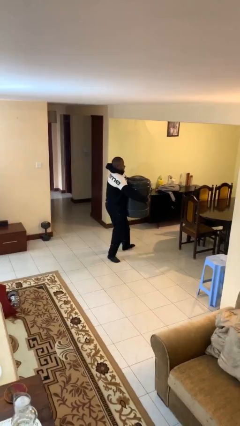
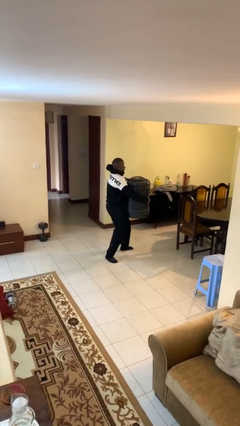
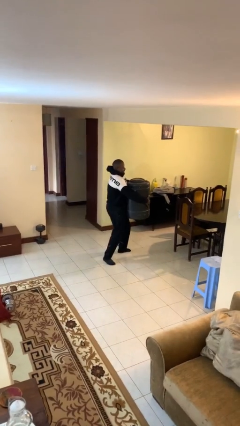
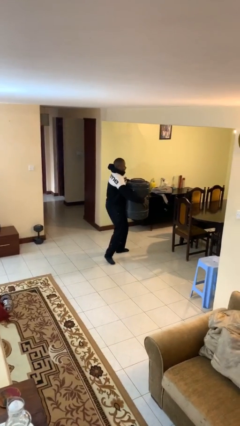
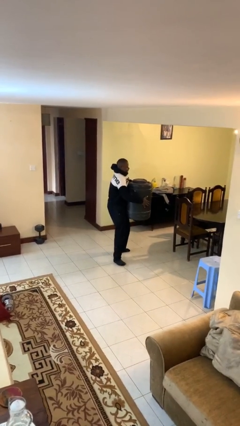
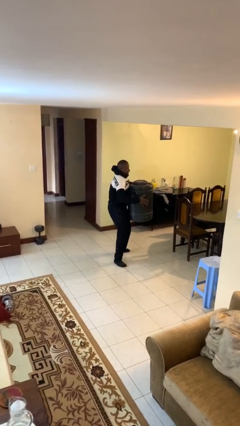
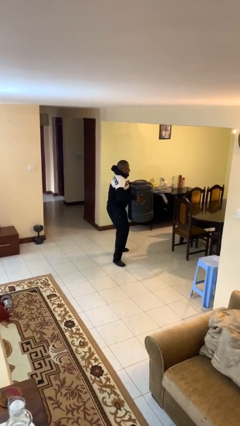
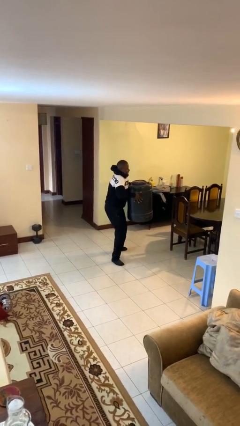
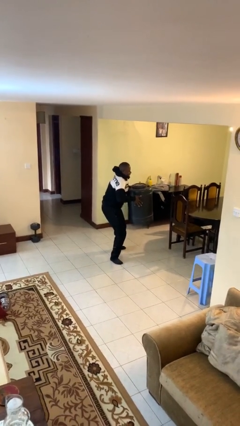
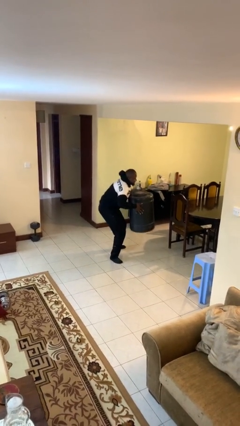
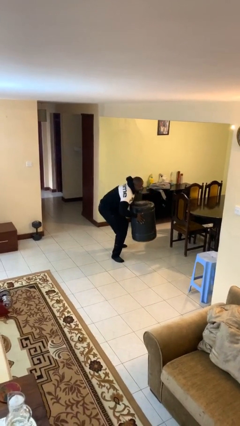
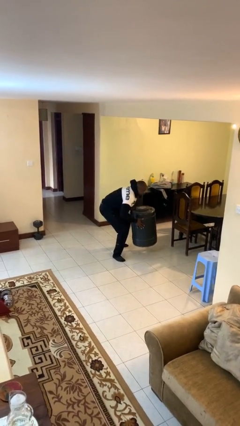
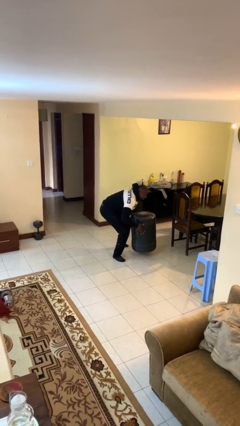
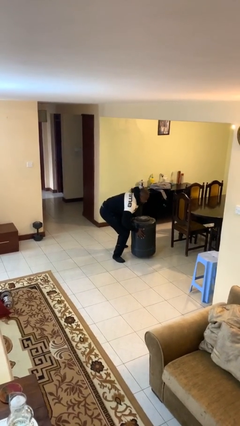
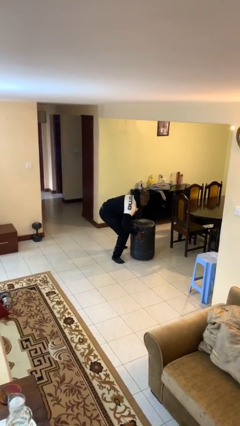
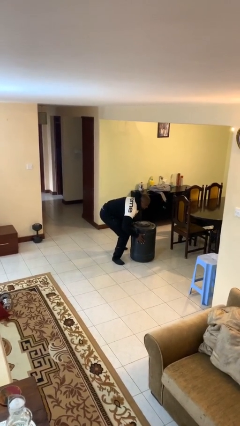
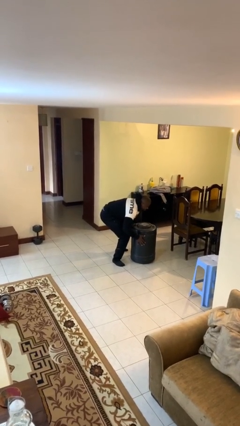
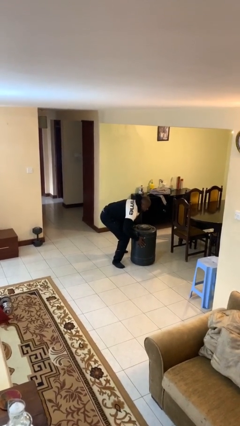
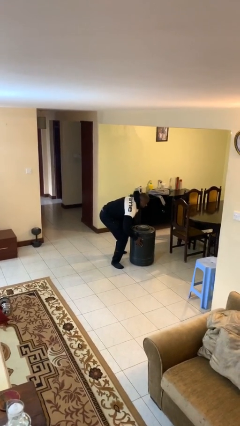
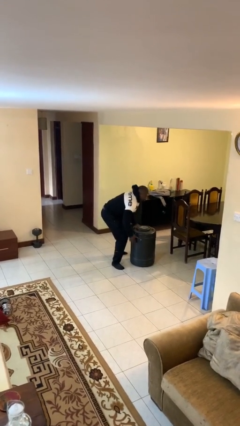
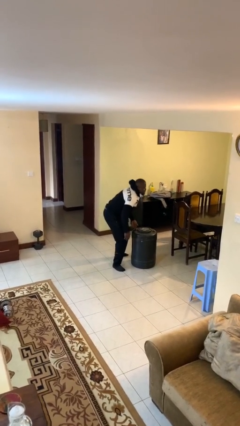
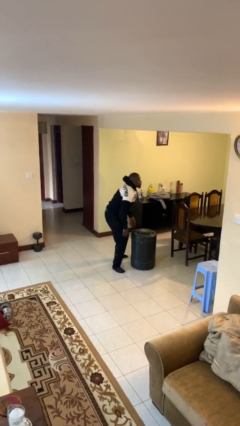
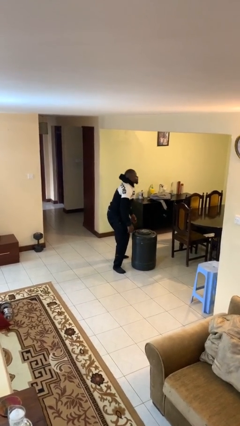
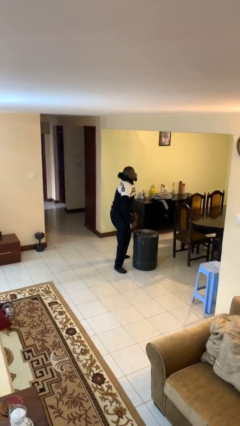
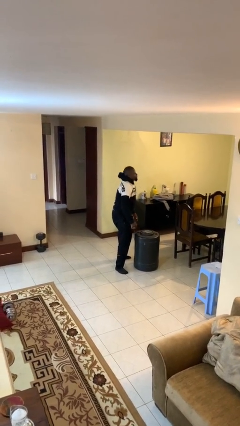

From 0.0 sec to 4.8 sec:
person puts down object on floor

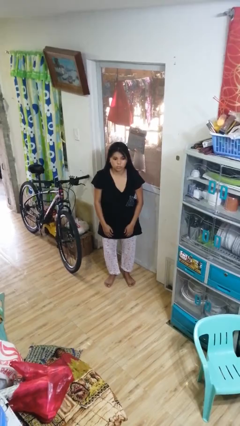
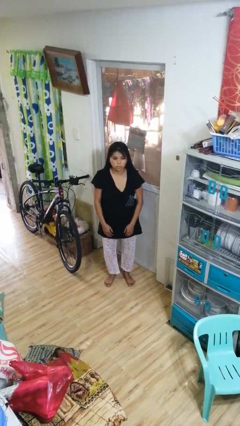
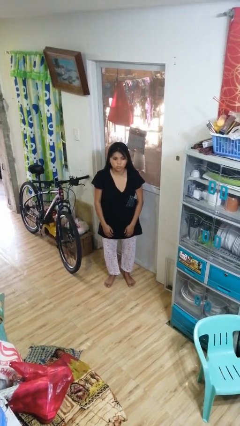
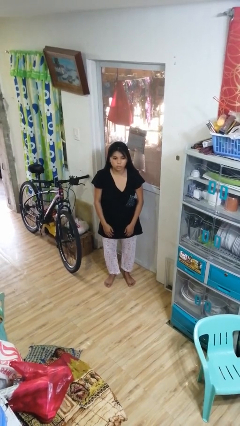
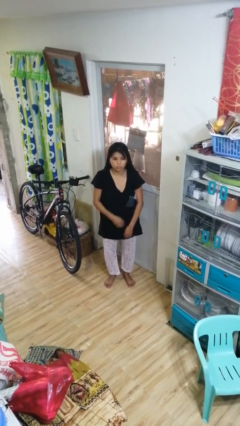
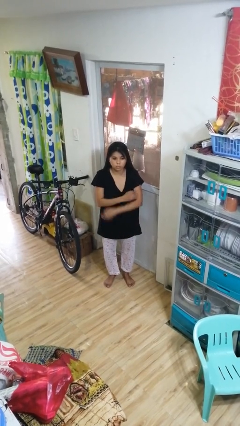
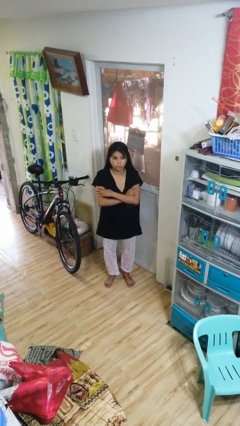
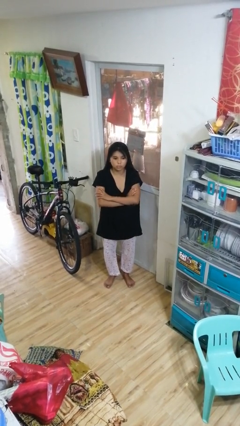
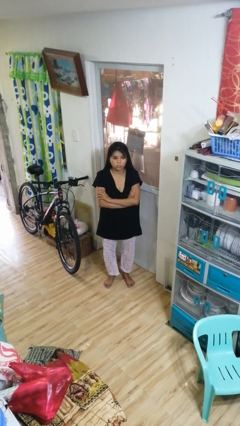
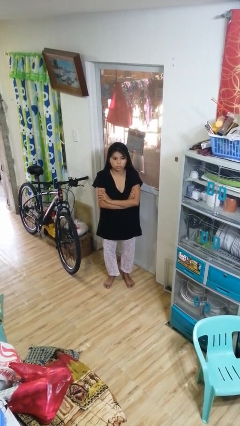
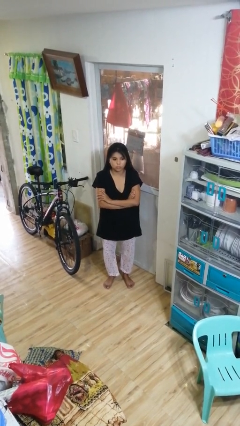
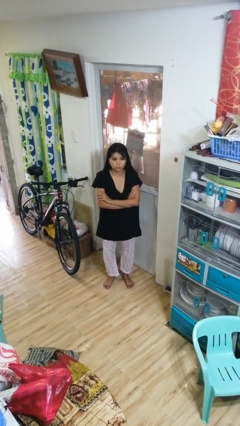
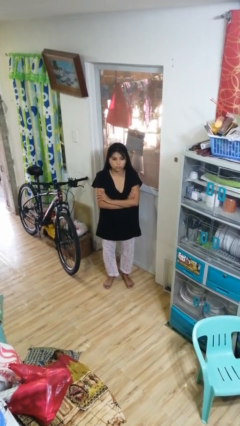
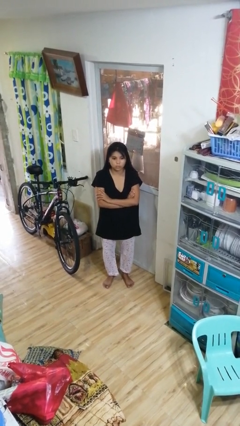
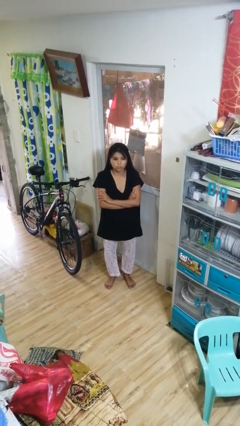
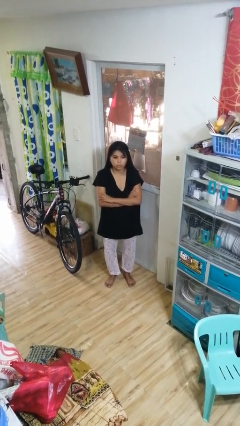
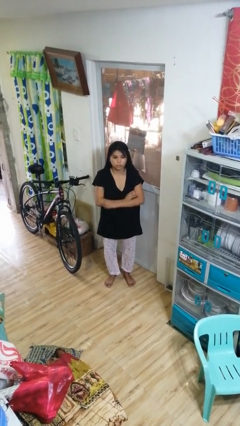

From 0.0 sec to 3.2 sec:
person crosses arms

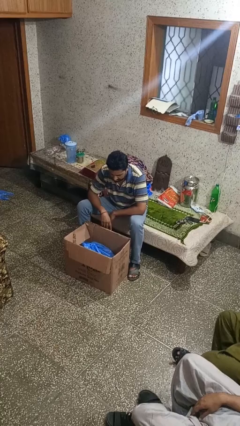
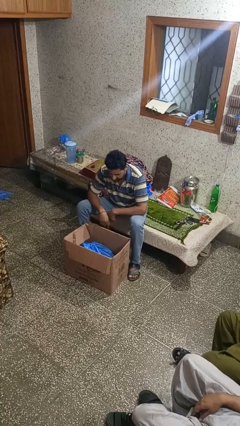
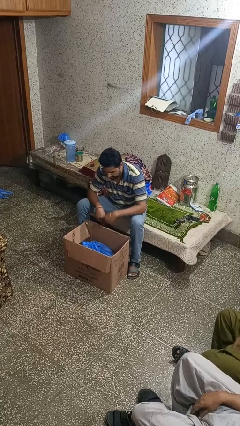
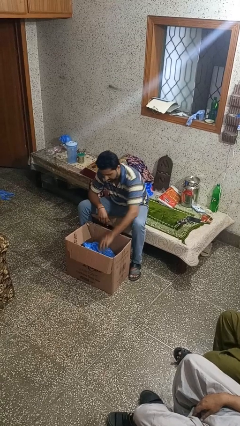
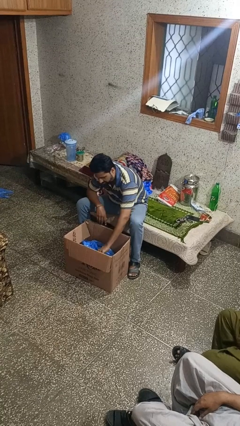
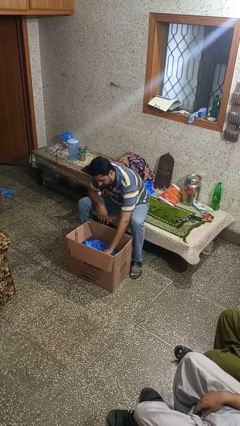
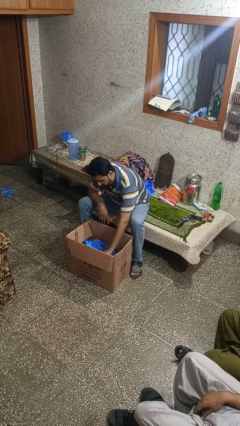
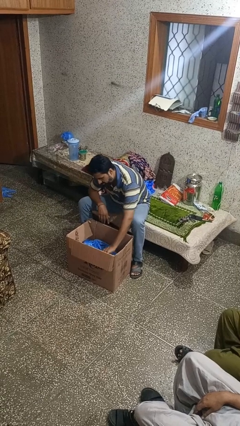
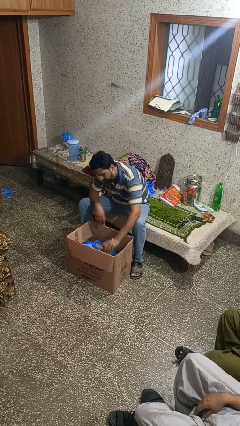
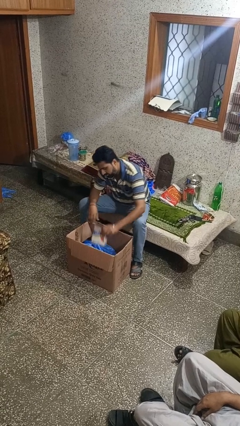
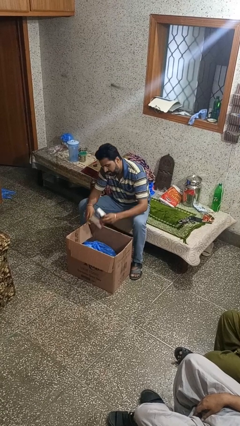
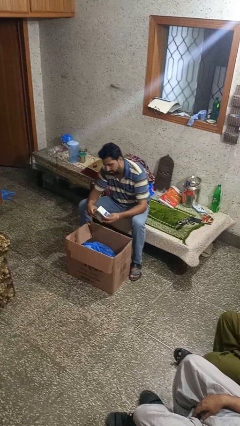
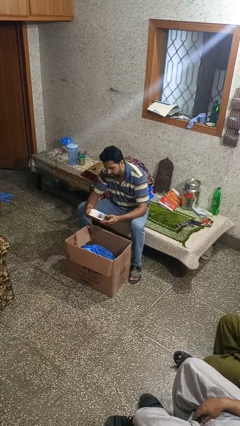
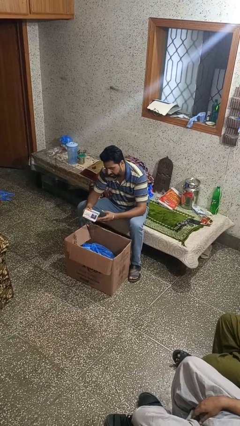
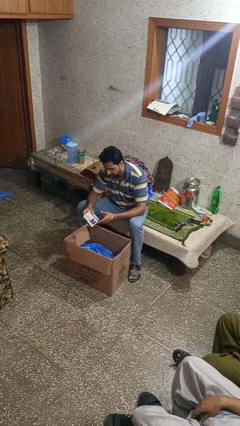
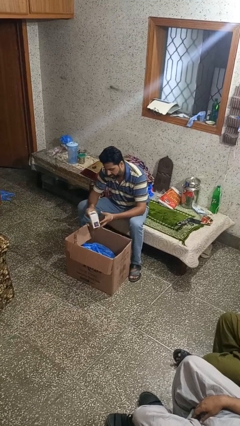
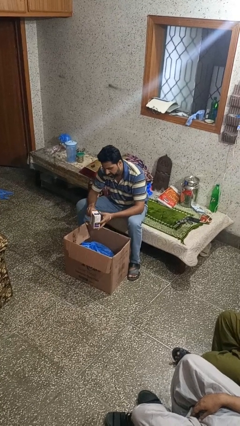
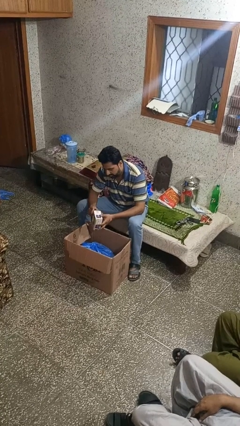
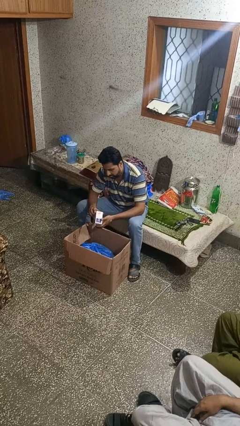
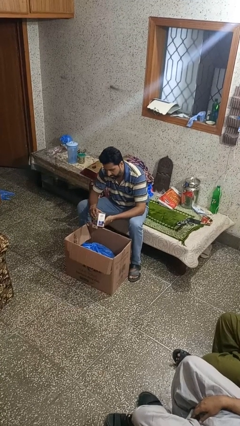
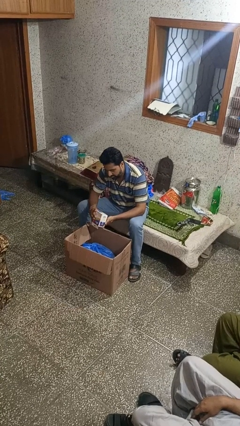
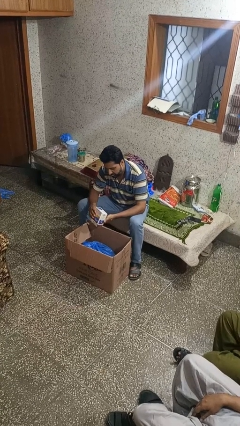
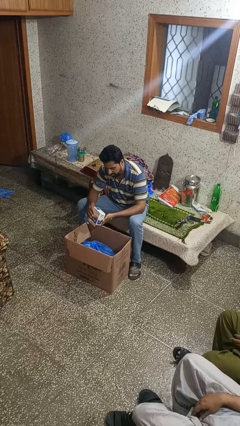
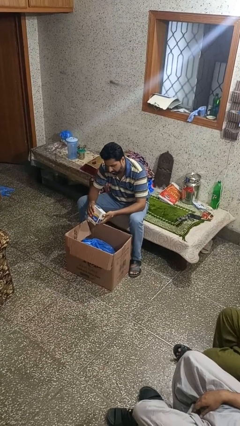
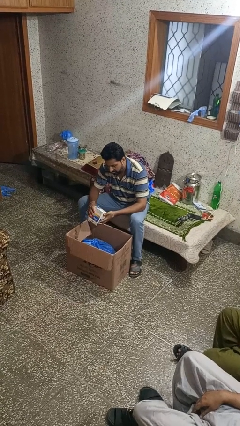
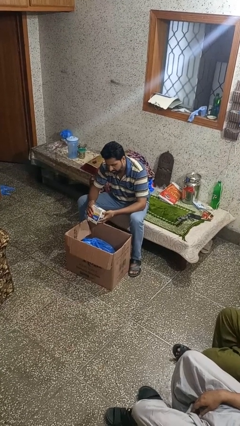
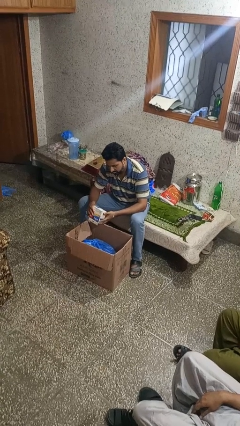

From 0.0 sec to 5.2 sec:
person takes object from box

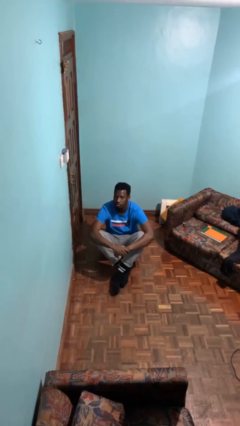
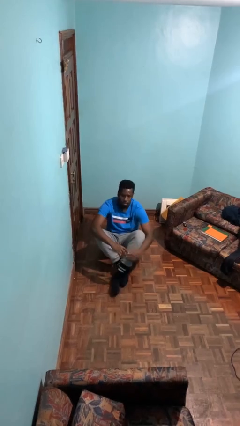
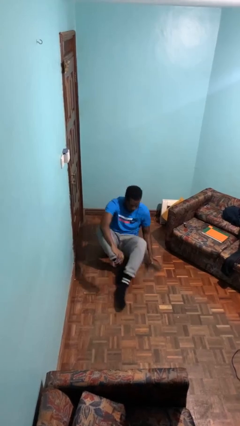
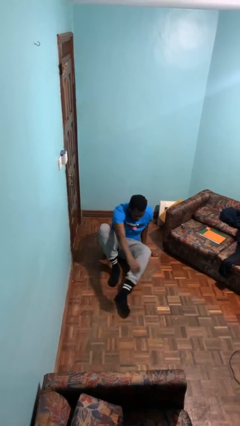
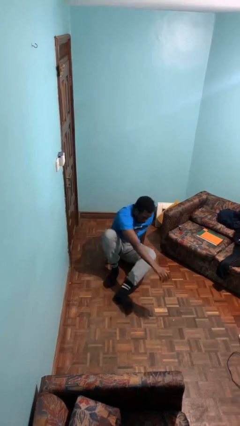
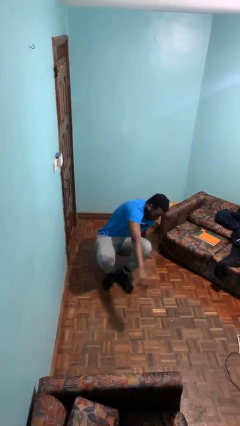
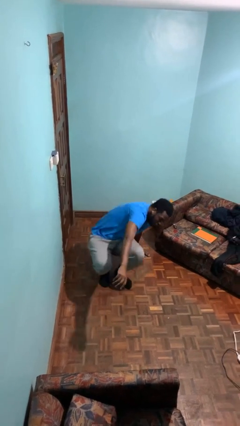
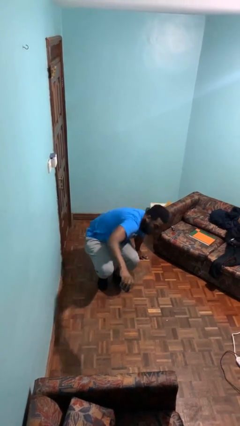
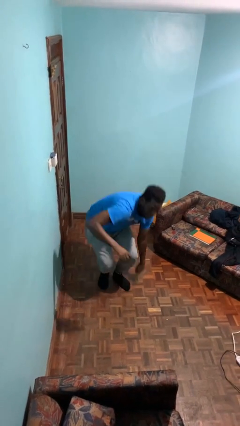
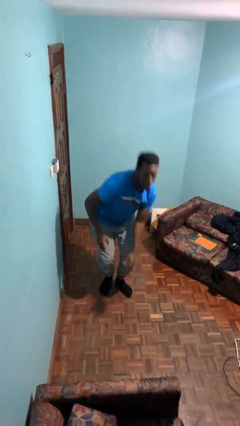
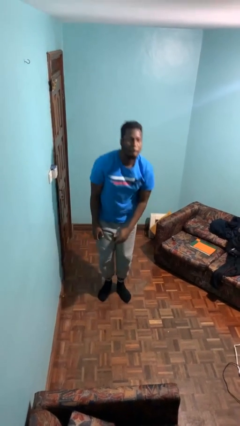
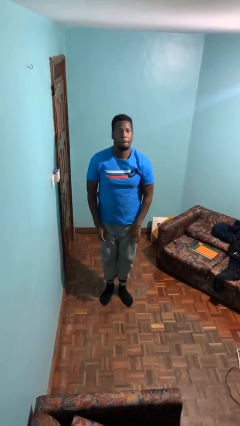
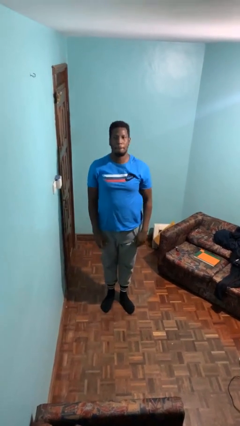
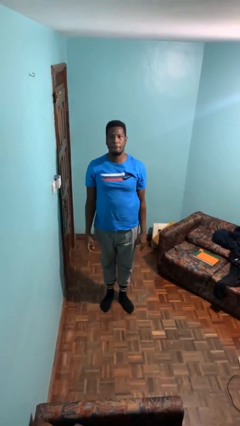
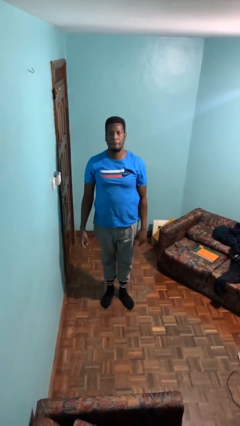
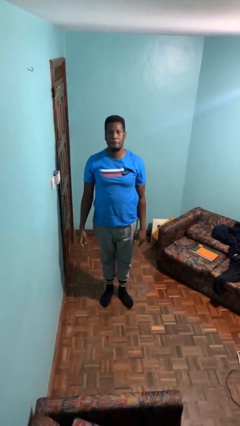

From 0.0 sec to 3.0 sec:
person stands up from floor

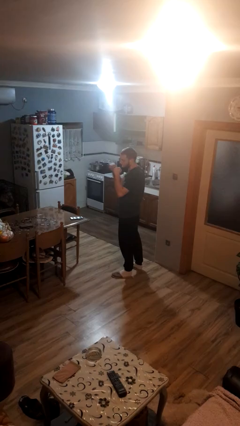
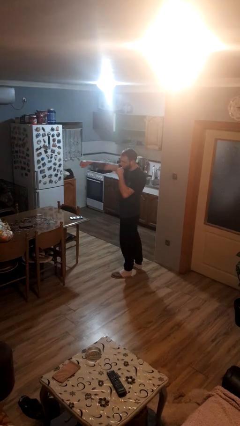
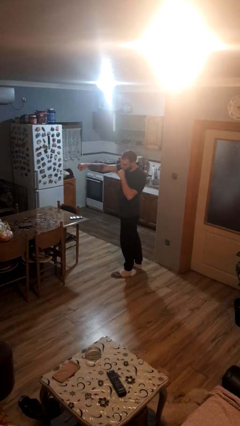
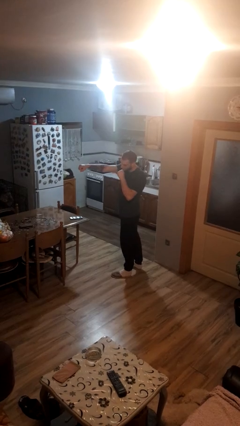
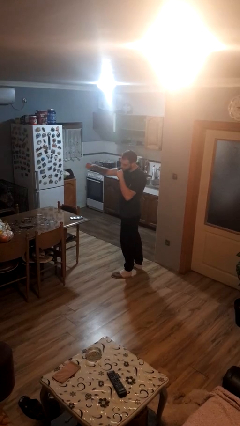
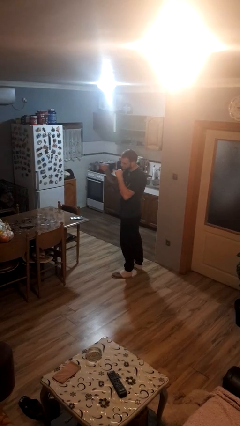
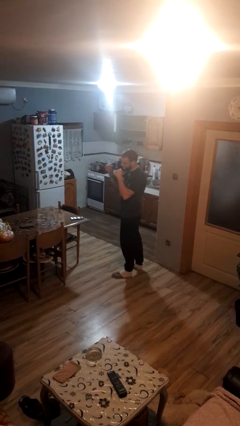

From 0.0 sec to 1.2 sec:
person punches
